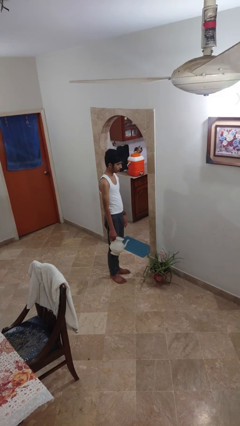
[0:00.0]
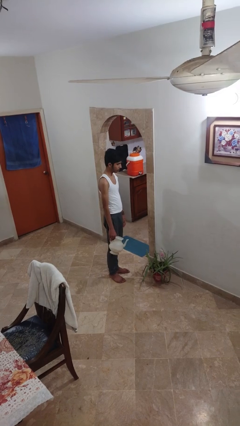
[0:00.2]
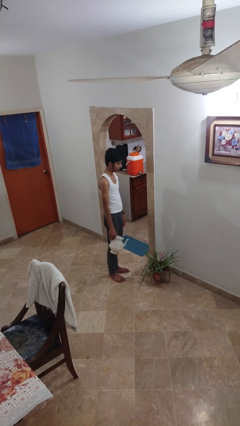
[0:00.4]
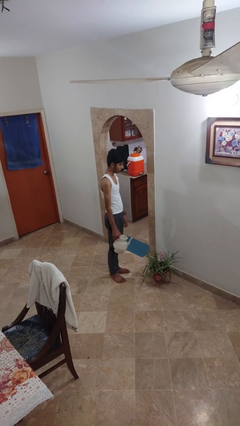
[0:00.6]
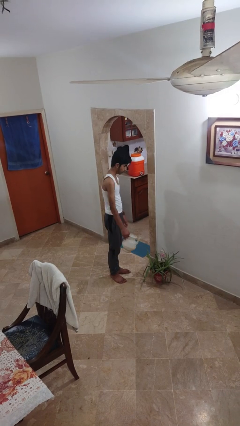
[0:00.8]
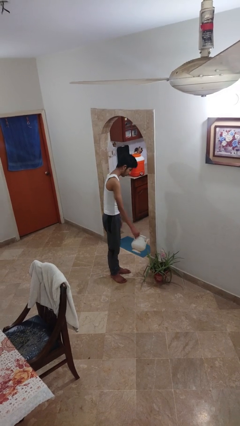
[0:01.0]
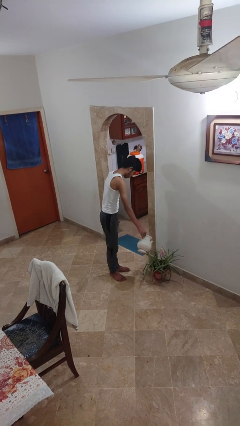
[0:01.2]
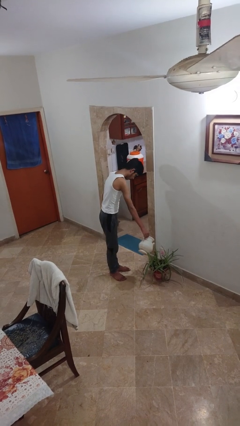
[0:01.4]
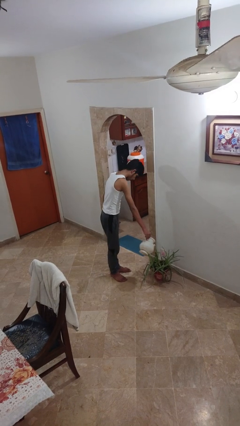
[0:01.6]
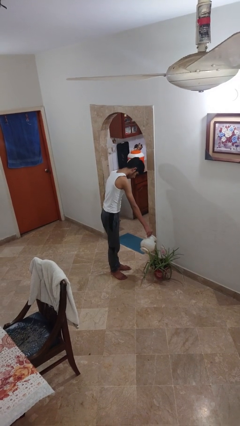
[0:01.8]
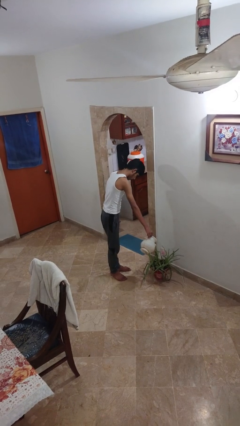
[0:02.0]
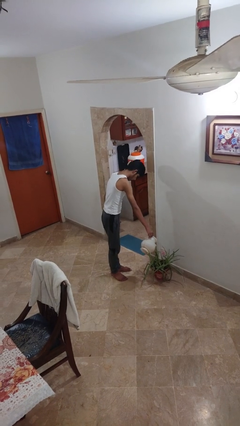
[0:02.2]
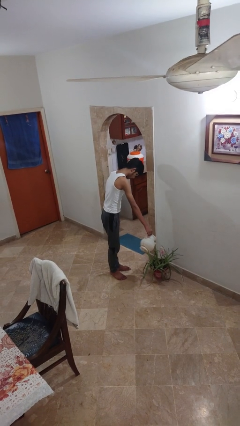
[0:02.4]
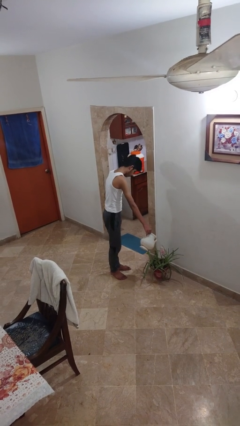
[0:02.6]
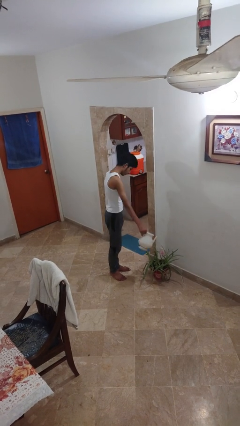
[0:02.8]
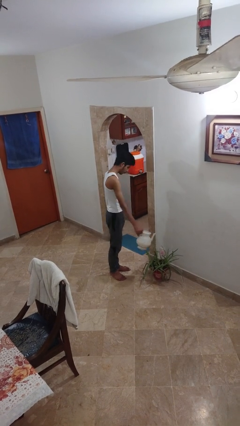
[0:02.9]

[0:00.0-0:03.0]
person waters houseplant

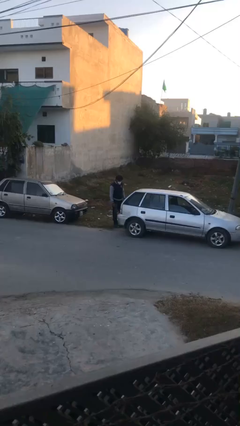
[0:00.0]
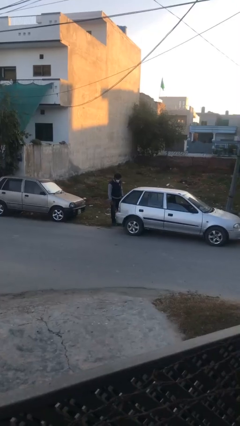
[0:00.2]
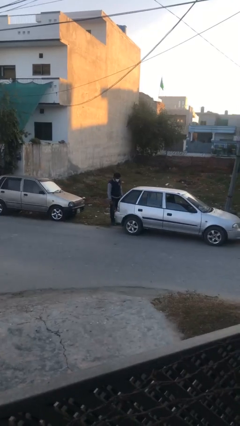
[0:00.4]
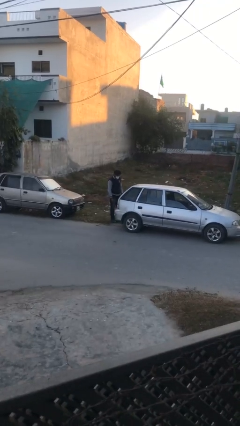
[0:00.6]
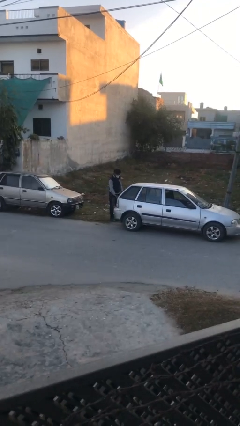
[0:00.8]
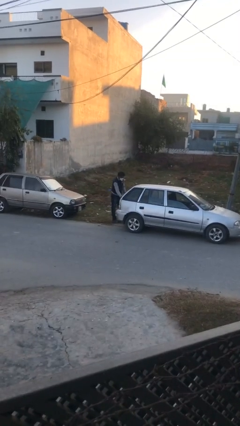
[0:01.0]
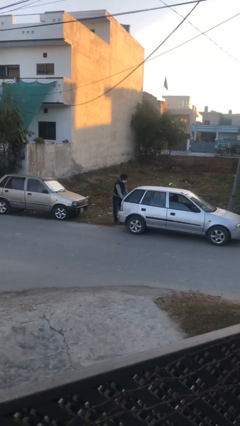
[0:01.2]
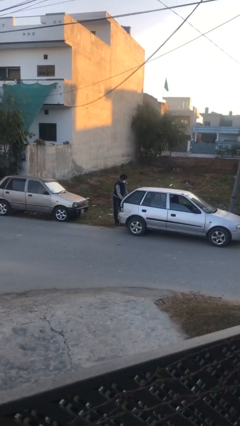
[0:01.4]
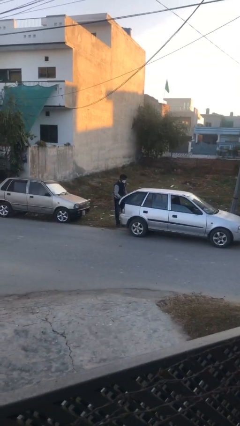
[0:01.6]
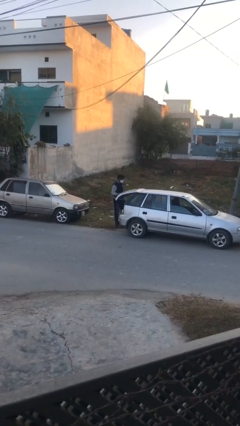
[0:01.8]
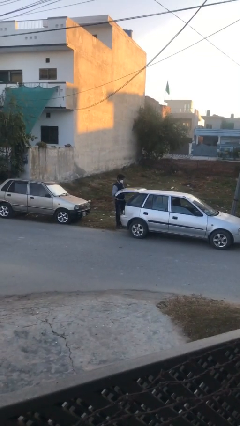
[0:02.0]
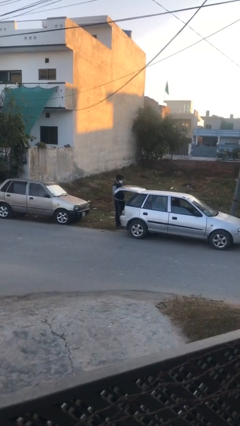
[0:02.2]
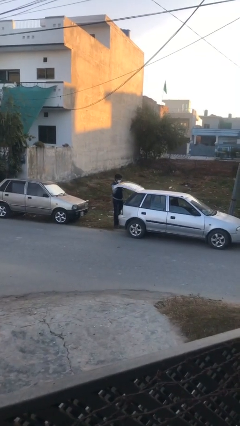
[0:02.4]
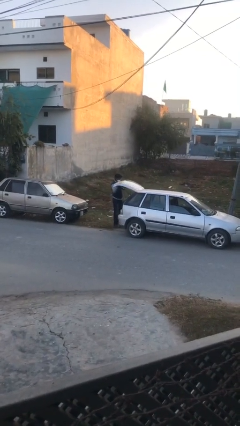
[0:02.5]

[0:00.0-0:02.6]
person opens car trunk

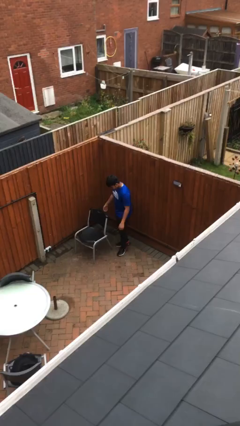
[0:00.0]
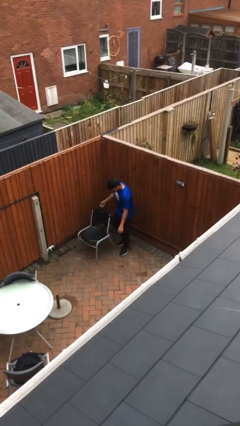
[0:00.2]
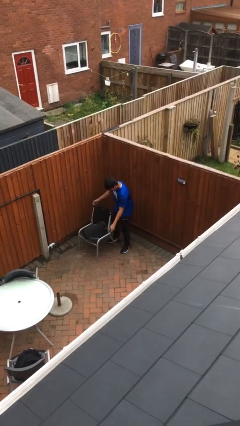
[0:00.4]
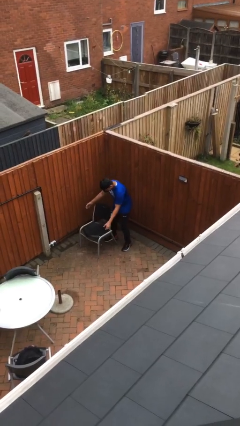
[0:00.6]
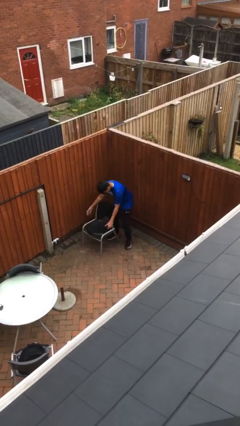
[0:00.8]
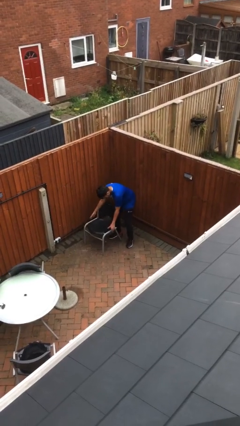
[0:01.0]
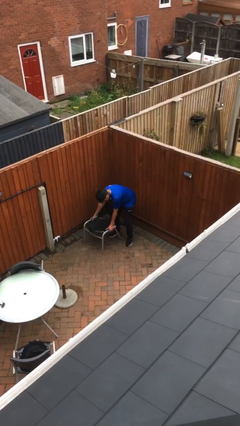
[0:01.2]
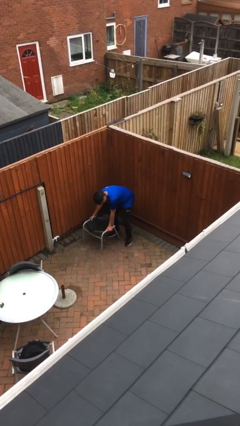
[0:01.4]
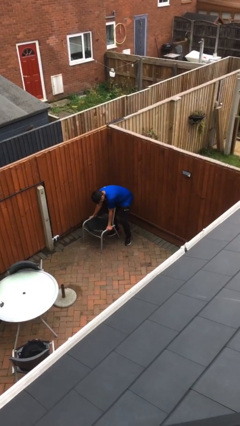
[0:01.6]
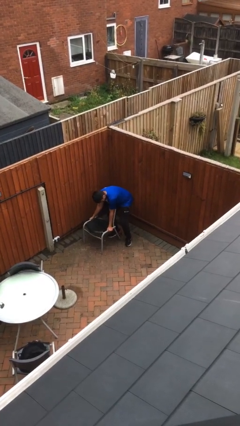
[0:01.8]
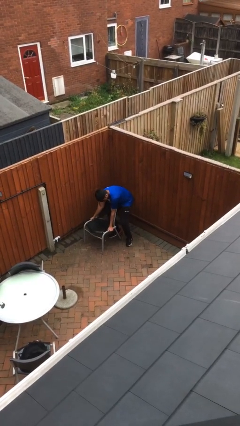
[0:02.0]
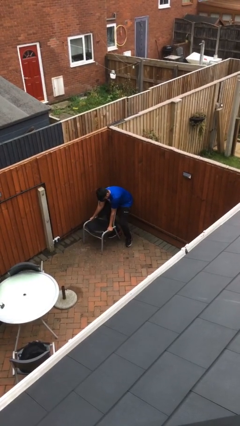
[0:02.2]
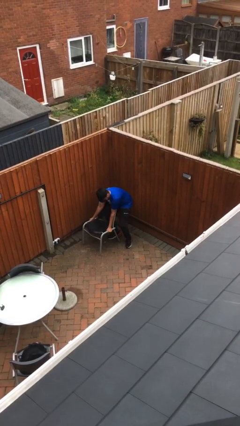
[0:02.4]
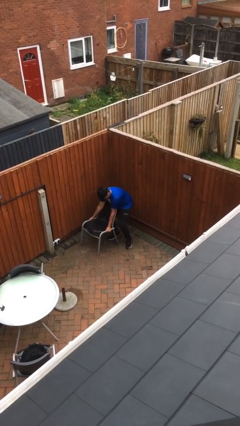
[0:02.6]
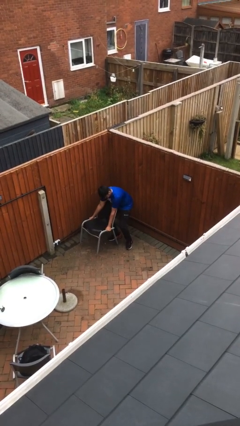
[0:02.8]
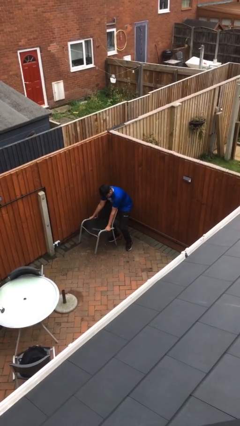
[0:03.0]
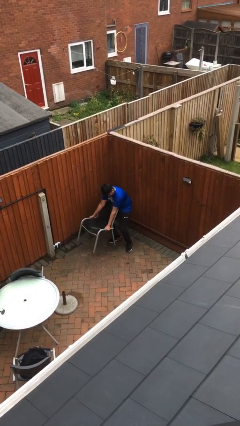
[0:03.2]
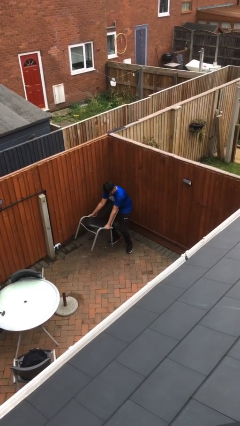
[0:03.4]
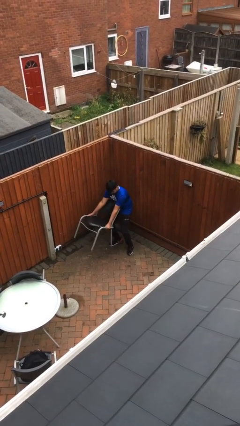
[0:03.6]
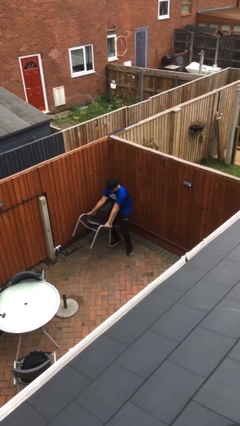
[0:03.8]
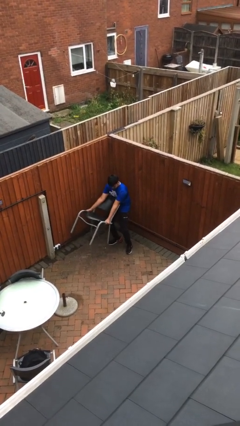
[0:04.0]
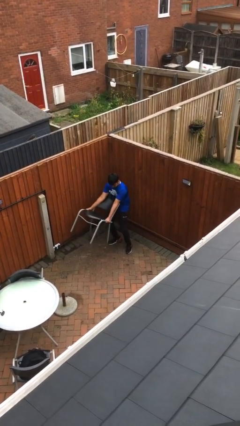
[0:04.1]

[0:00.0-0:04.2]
person picks up object from floor

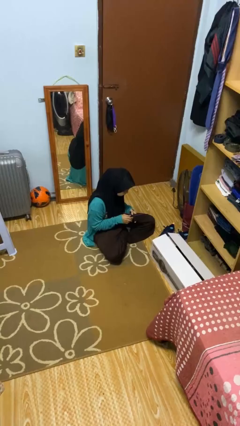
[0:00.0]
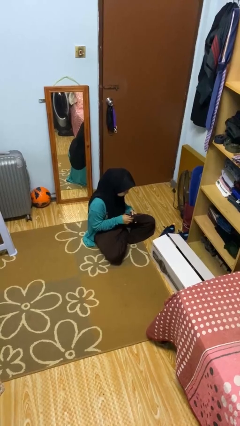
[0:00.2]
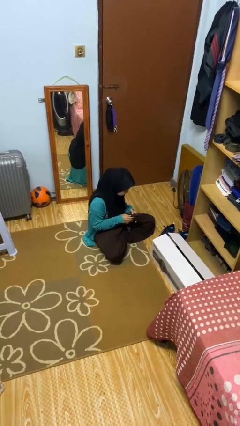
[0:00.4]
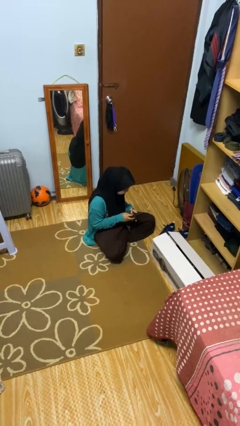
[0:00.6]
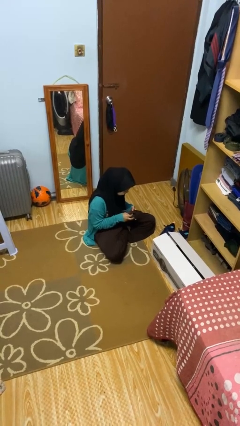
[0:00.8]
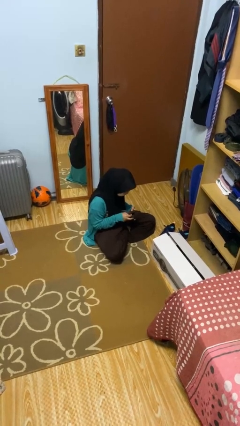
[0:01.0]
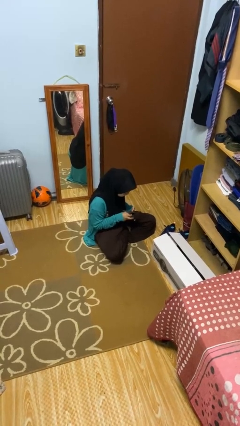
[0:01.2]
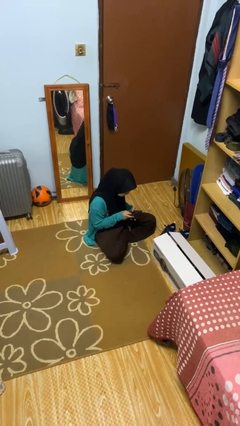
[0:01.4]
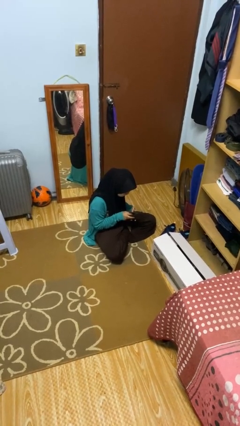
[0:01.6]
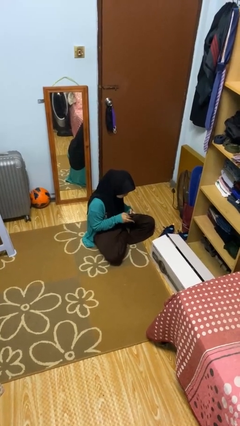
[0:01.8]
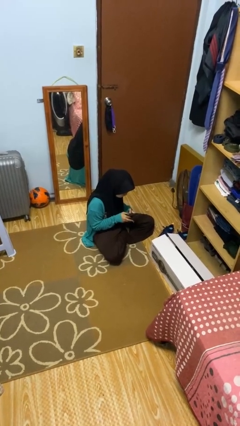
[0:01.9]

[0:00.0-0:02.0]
person searches in purse

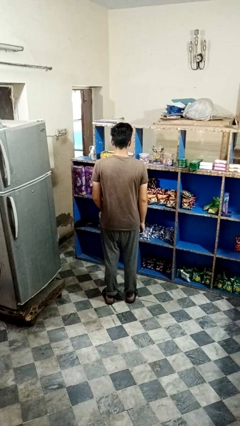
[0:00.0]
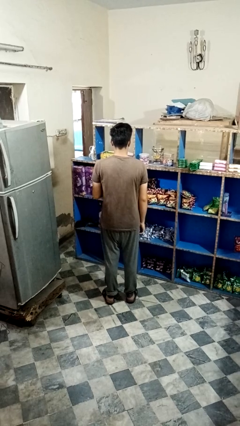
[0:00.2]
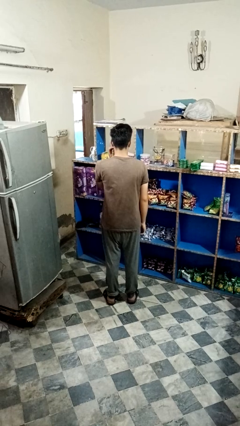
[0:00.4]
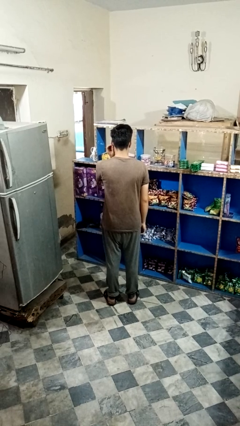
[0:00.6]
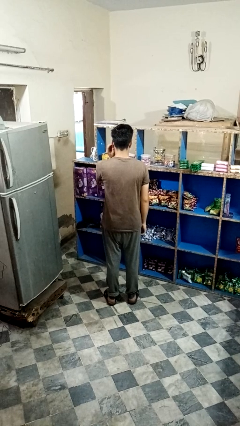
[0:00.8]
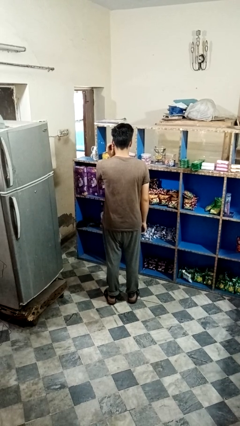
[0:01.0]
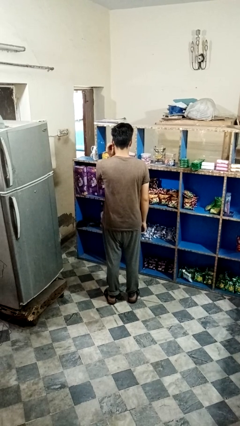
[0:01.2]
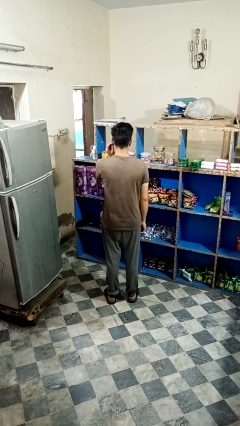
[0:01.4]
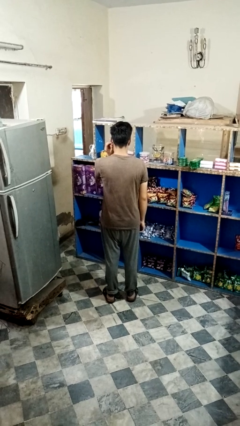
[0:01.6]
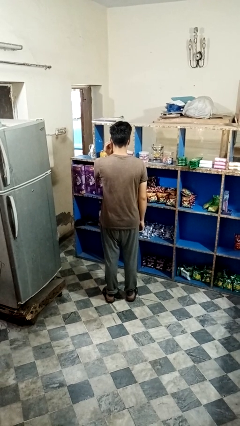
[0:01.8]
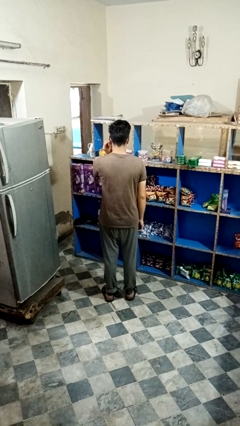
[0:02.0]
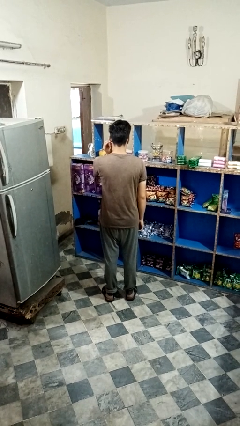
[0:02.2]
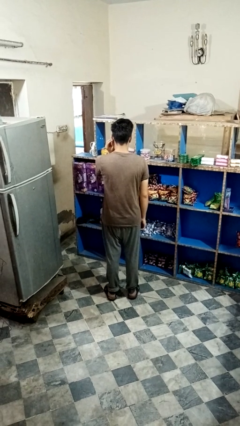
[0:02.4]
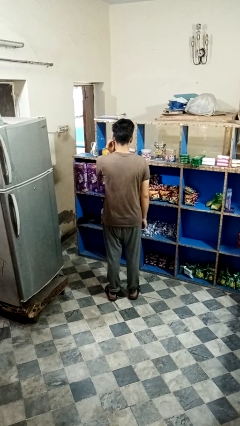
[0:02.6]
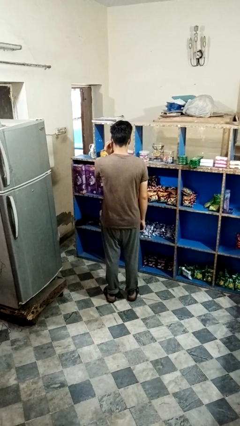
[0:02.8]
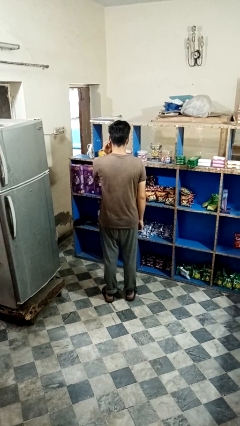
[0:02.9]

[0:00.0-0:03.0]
person touches earlobe

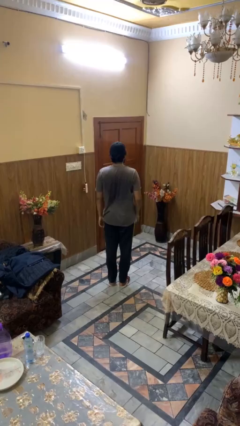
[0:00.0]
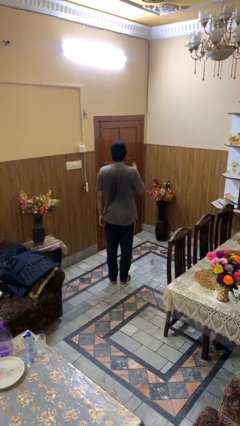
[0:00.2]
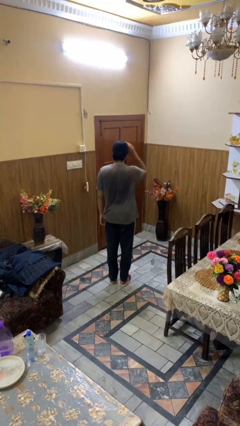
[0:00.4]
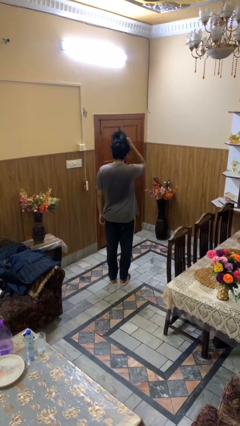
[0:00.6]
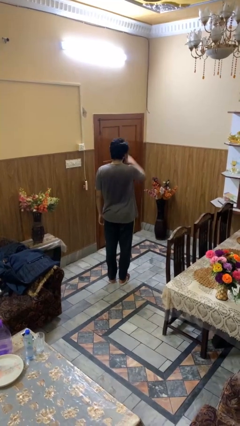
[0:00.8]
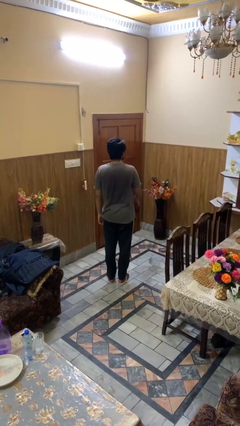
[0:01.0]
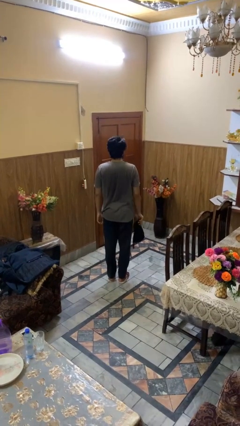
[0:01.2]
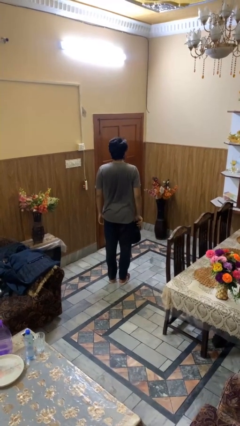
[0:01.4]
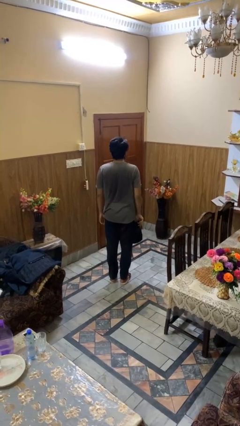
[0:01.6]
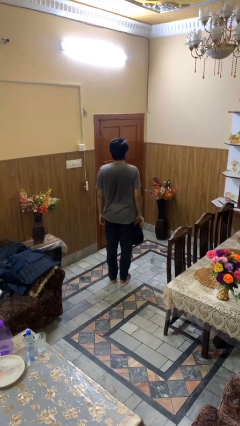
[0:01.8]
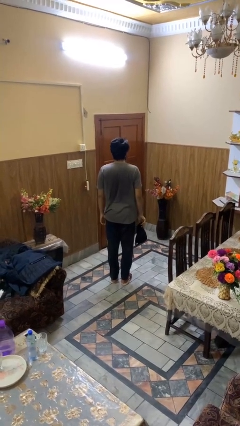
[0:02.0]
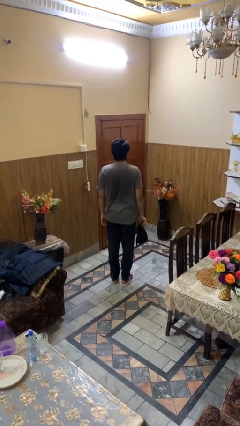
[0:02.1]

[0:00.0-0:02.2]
person takes off hat

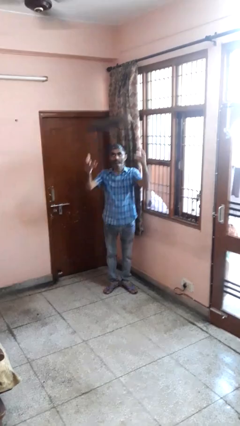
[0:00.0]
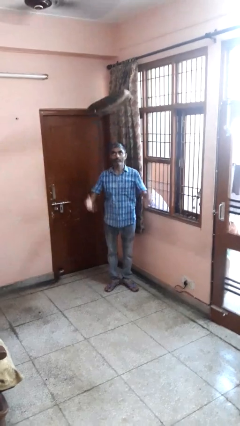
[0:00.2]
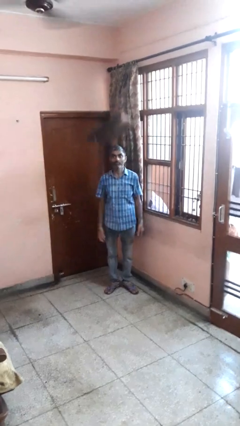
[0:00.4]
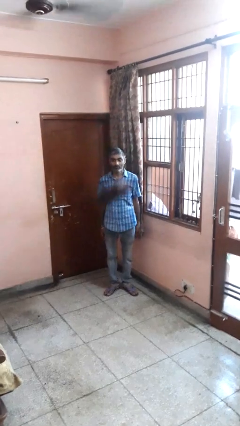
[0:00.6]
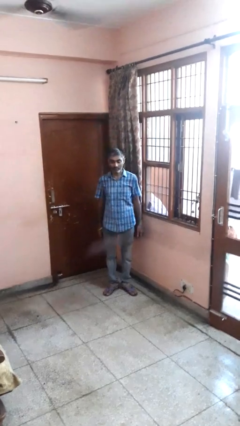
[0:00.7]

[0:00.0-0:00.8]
person throws object into air
